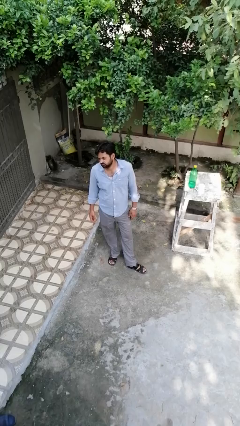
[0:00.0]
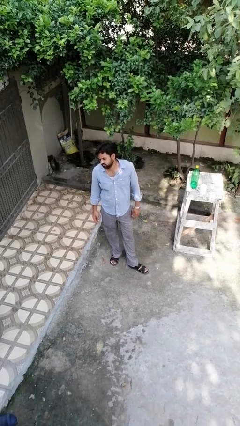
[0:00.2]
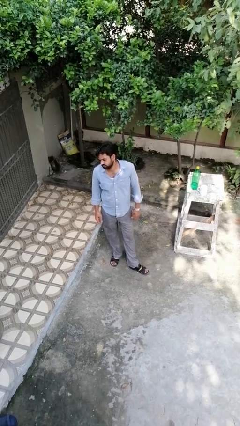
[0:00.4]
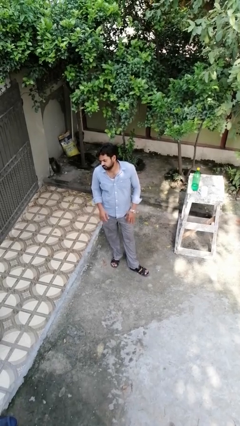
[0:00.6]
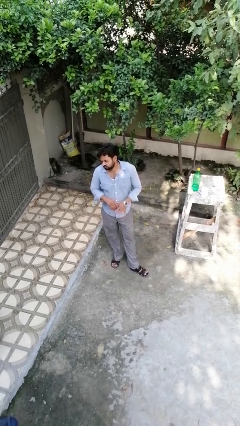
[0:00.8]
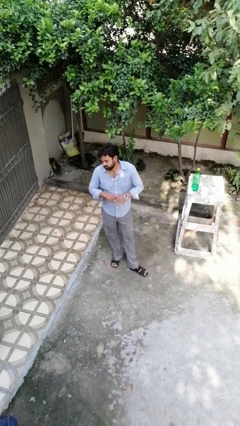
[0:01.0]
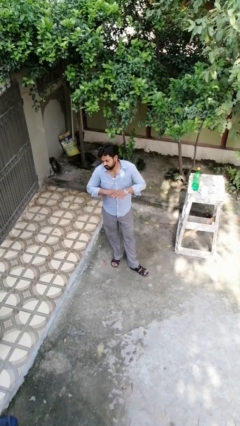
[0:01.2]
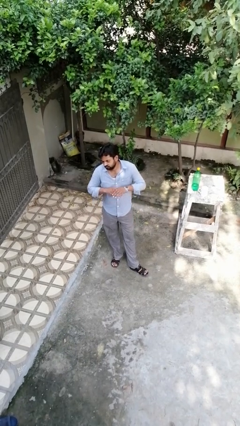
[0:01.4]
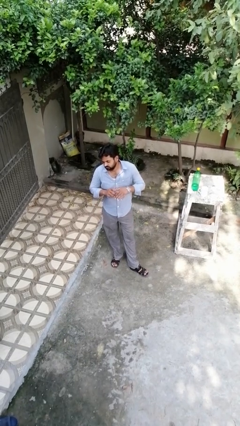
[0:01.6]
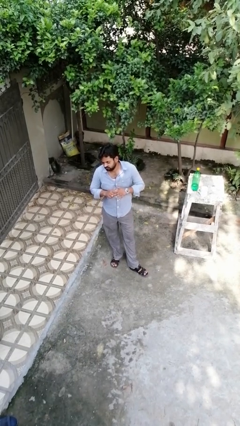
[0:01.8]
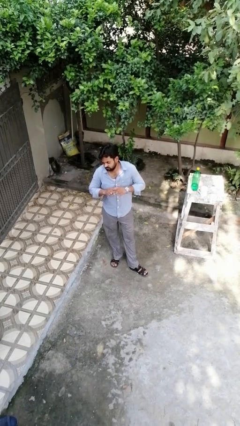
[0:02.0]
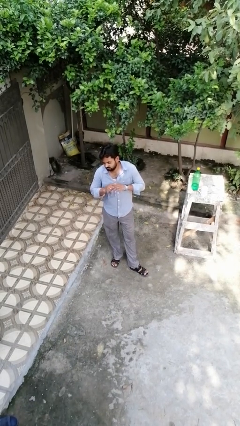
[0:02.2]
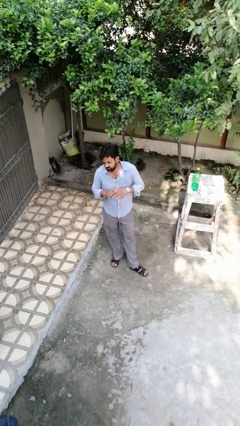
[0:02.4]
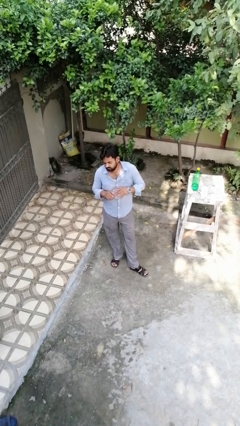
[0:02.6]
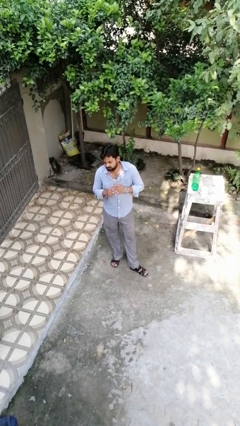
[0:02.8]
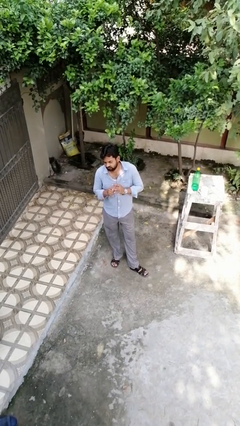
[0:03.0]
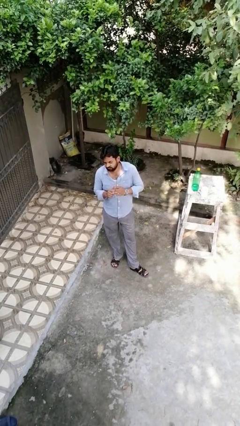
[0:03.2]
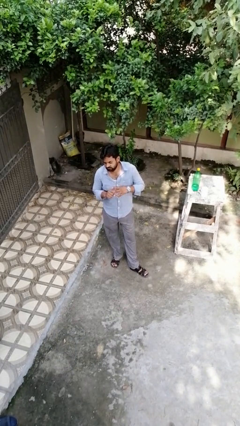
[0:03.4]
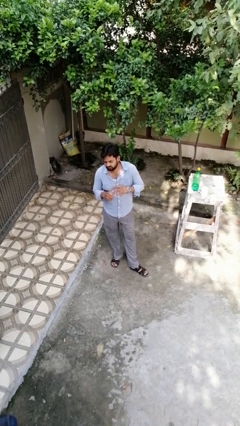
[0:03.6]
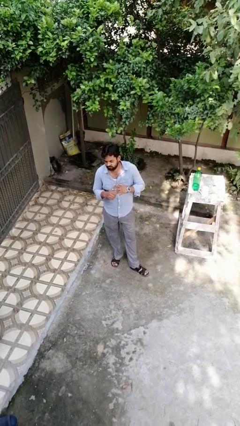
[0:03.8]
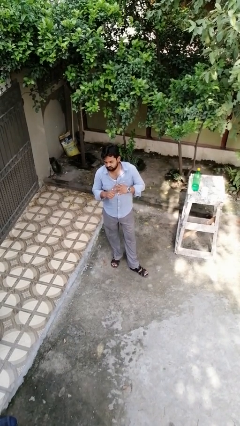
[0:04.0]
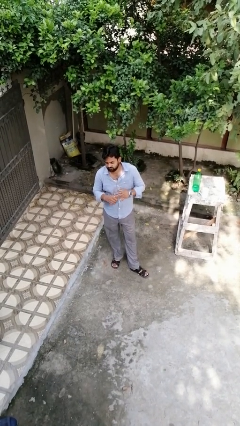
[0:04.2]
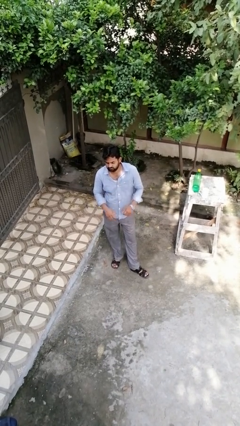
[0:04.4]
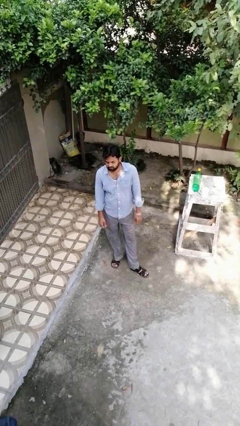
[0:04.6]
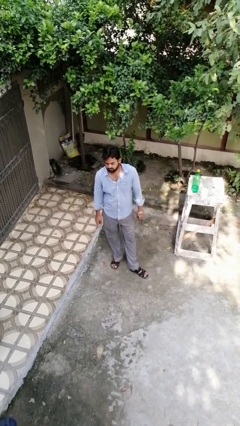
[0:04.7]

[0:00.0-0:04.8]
person snaps fingers

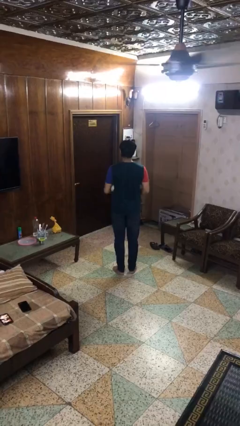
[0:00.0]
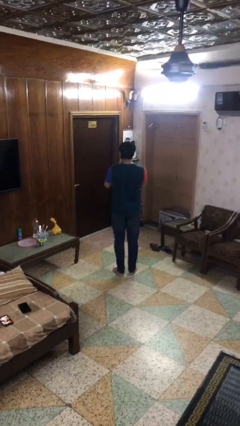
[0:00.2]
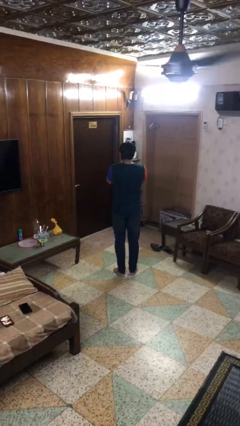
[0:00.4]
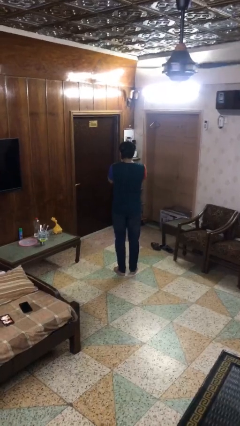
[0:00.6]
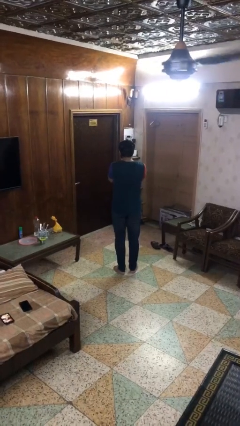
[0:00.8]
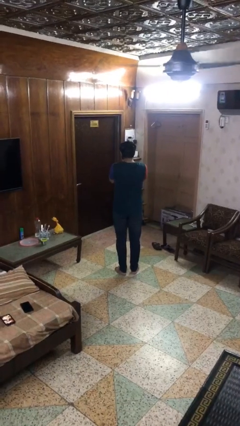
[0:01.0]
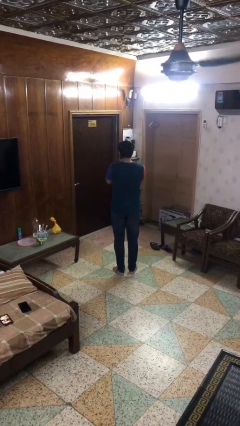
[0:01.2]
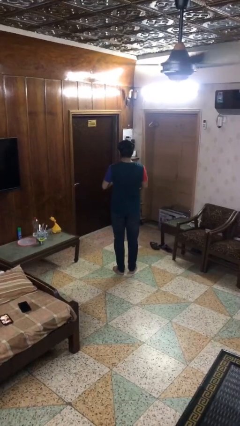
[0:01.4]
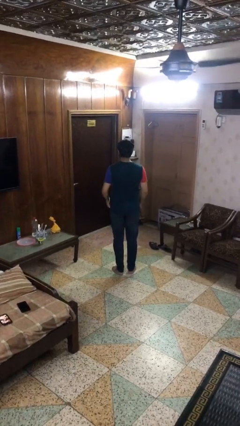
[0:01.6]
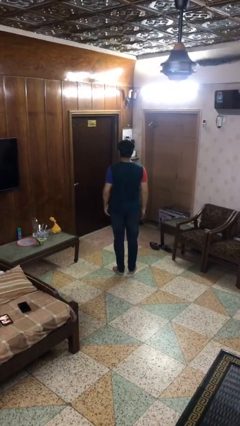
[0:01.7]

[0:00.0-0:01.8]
person sneezes into hand

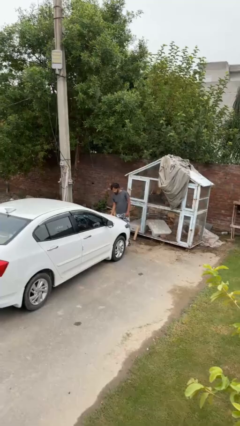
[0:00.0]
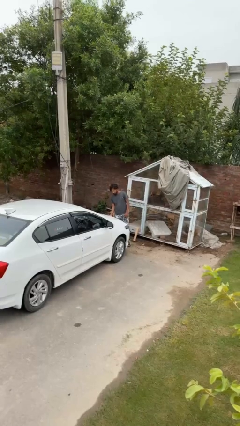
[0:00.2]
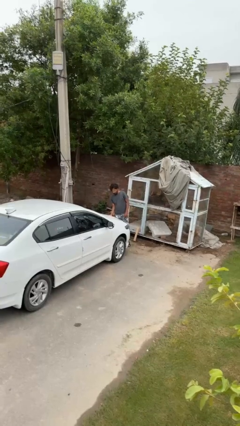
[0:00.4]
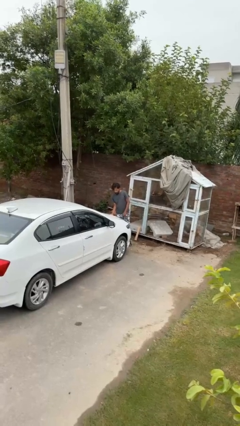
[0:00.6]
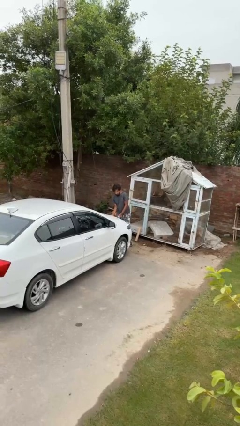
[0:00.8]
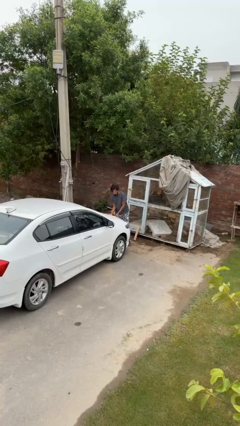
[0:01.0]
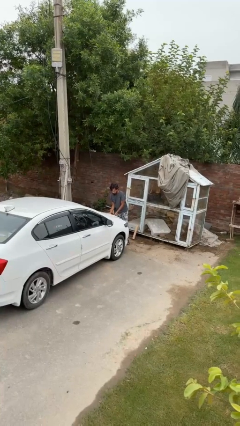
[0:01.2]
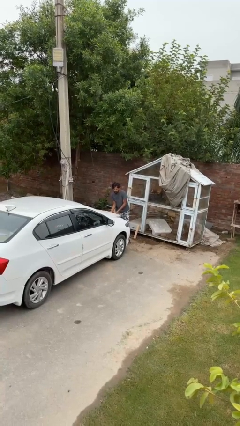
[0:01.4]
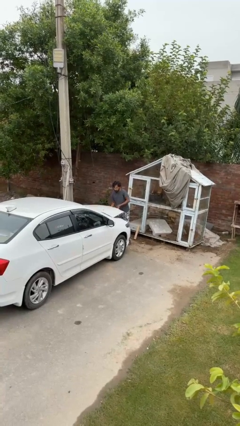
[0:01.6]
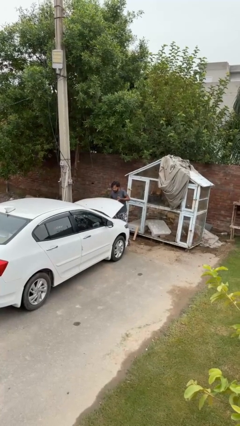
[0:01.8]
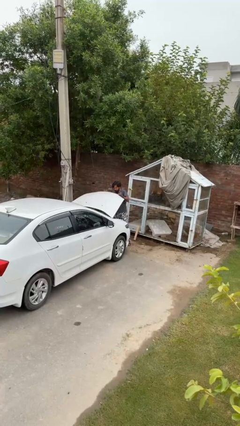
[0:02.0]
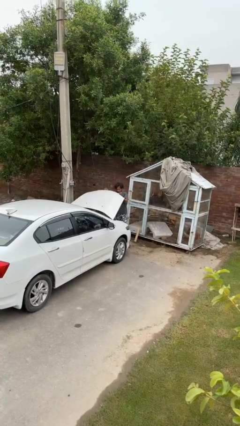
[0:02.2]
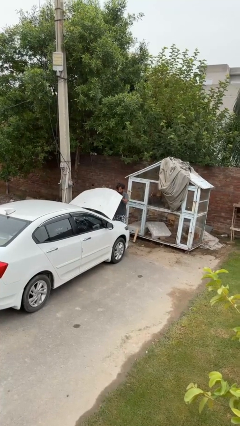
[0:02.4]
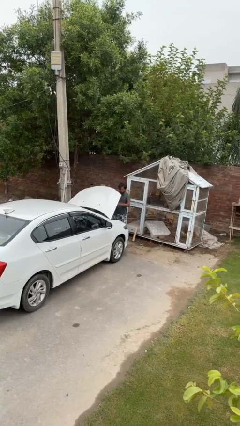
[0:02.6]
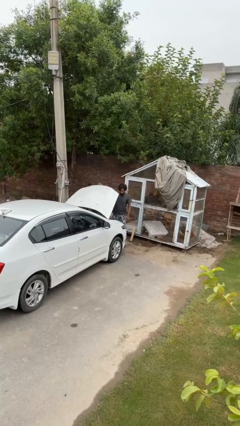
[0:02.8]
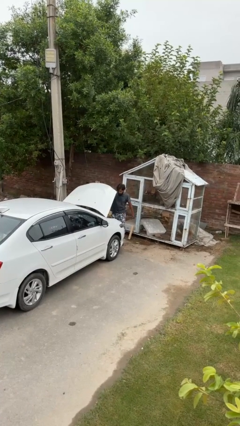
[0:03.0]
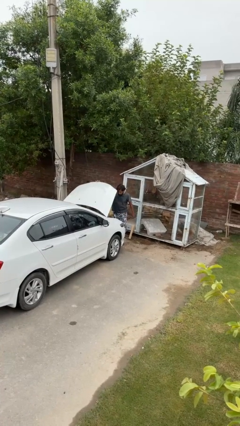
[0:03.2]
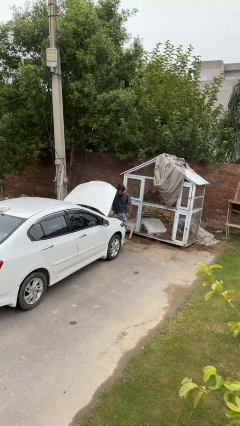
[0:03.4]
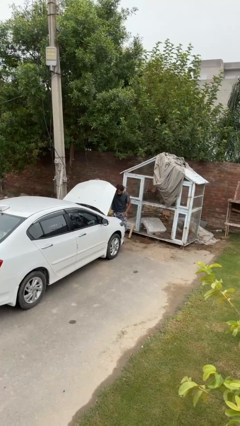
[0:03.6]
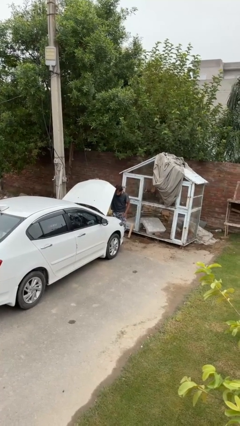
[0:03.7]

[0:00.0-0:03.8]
person opens car hood

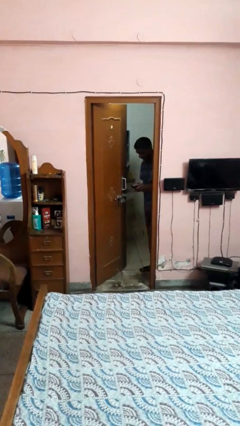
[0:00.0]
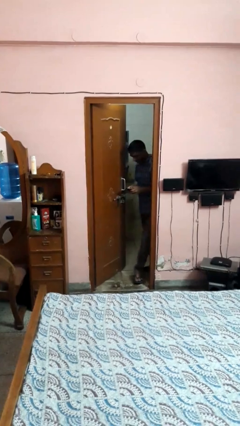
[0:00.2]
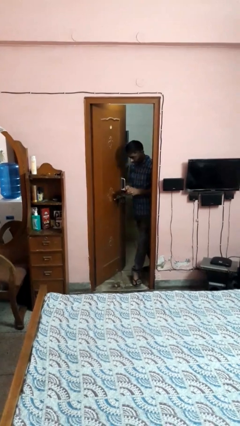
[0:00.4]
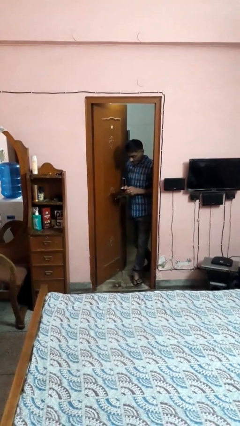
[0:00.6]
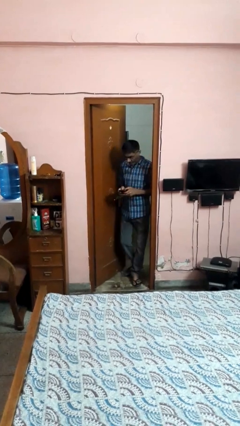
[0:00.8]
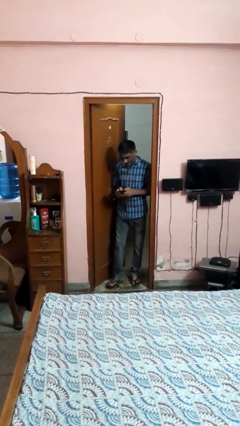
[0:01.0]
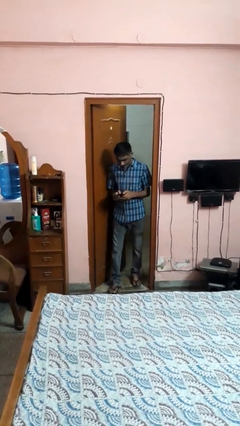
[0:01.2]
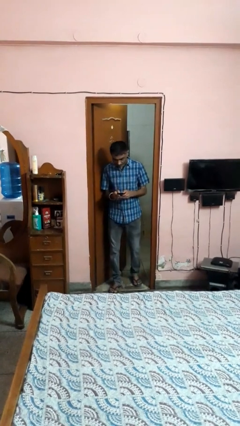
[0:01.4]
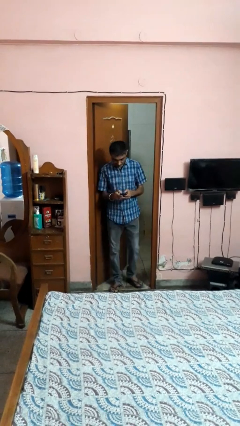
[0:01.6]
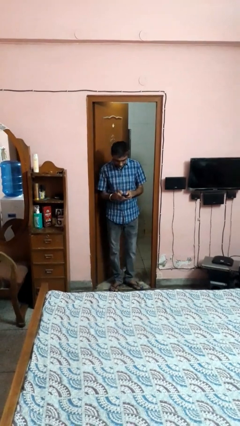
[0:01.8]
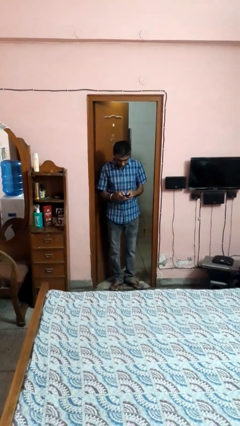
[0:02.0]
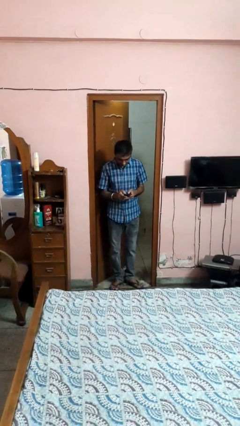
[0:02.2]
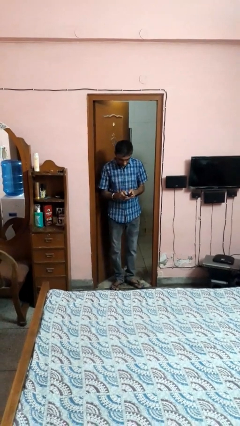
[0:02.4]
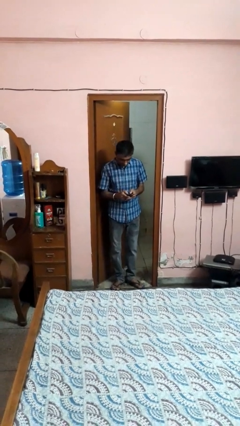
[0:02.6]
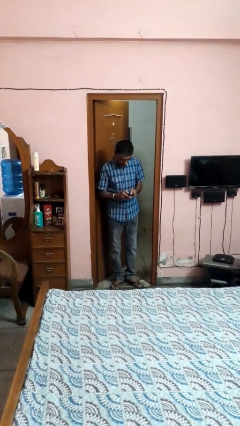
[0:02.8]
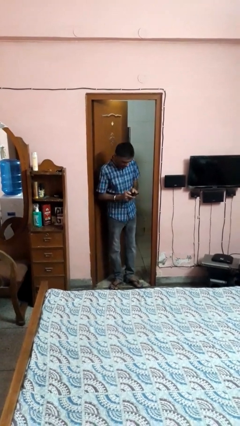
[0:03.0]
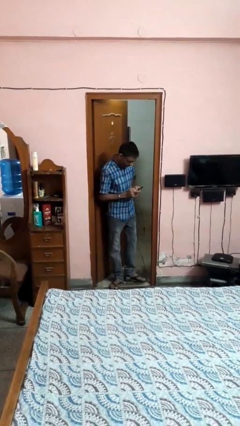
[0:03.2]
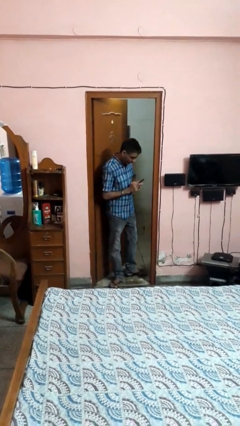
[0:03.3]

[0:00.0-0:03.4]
person enters scene through structure

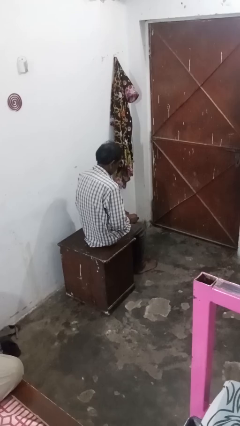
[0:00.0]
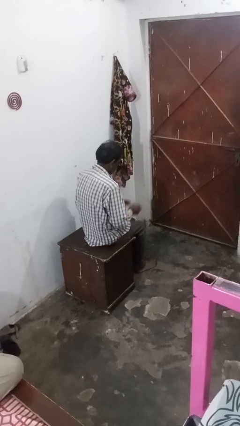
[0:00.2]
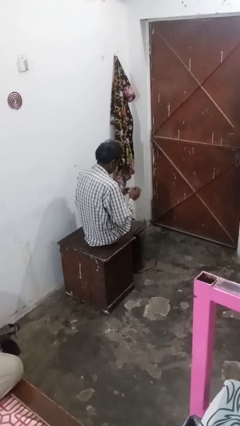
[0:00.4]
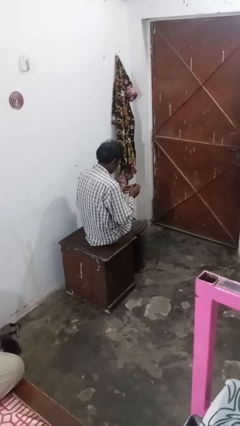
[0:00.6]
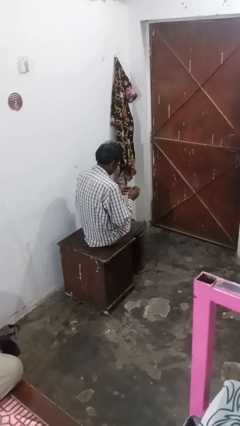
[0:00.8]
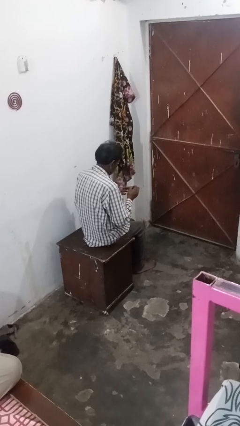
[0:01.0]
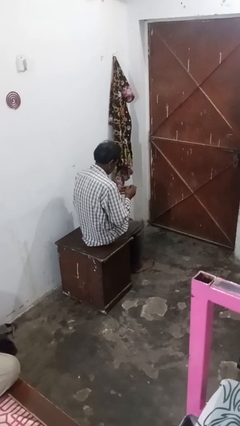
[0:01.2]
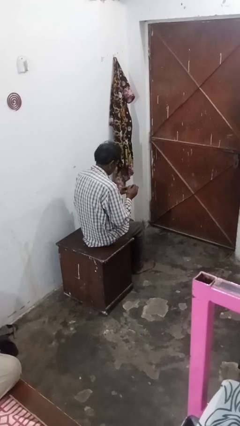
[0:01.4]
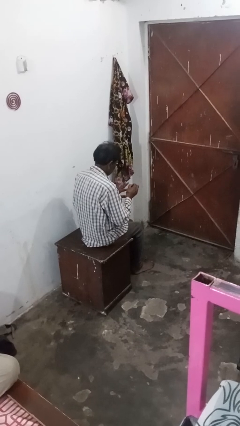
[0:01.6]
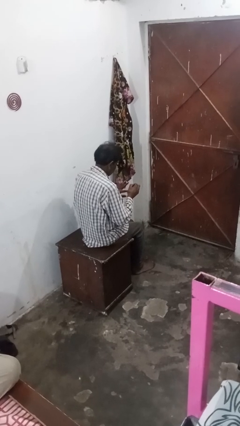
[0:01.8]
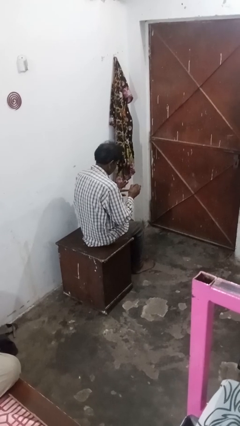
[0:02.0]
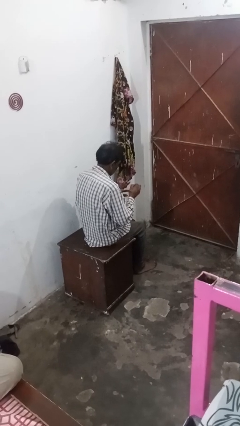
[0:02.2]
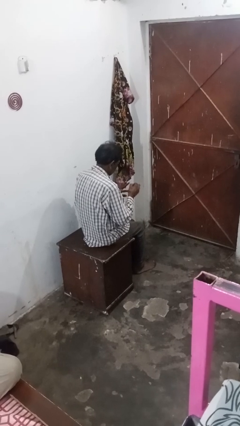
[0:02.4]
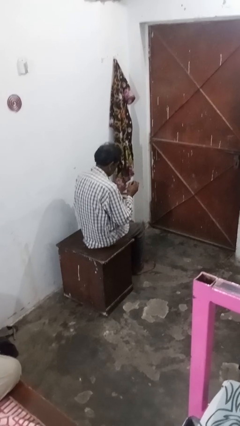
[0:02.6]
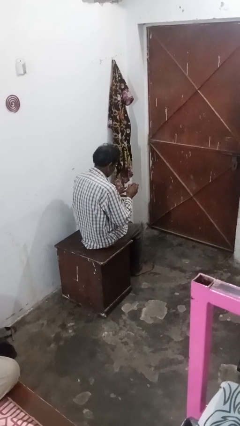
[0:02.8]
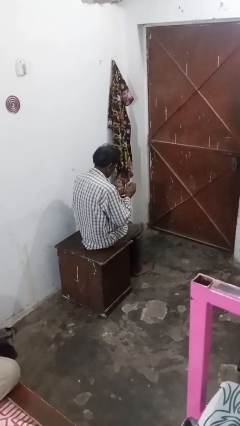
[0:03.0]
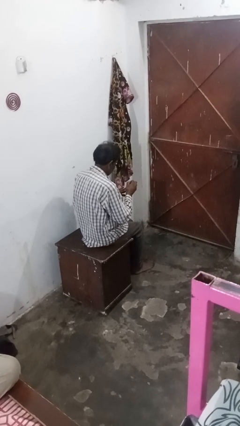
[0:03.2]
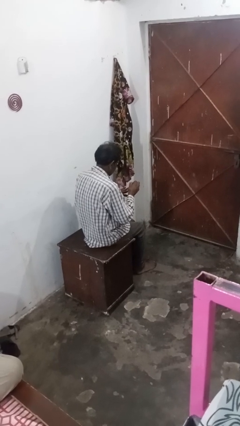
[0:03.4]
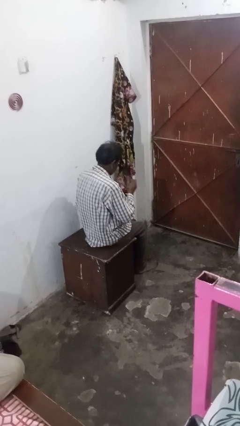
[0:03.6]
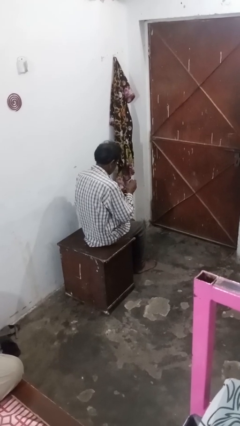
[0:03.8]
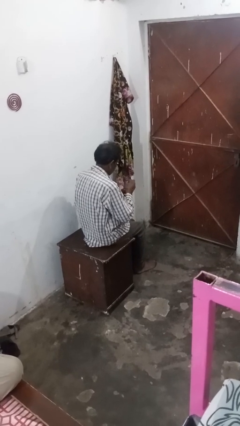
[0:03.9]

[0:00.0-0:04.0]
person paints fingernails
